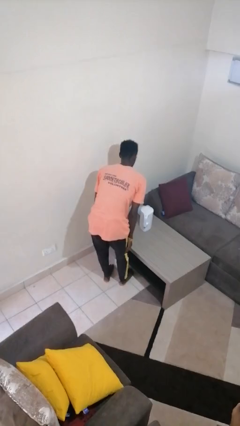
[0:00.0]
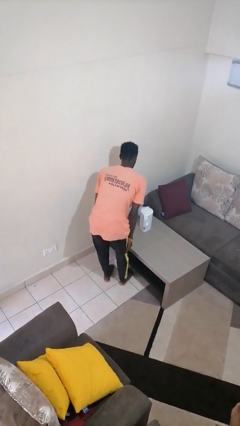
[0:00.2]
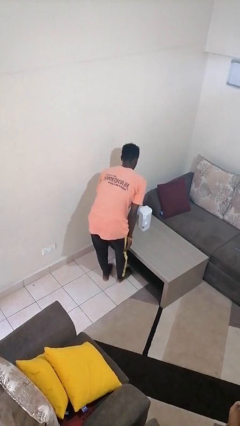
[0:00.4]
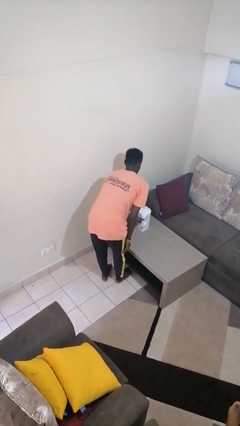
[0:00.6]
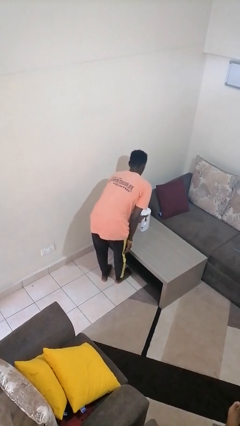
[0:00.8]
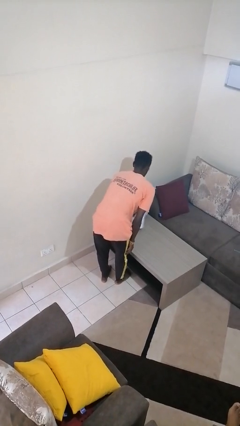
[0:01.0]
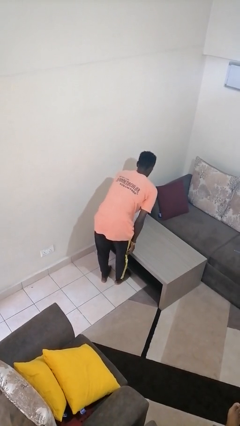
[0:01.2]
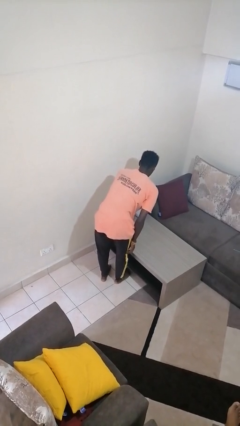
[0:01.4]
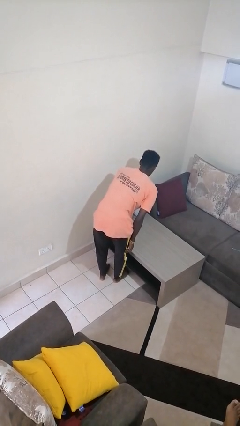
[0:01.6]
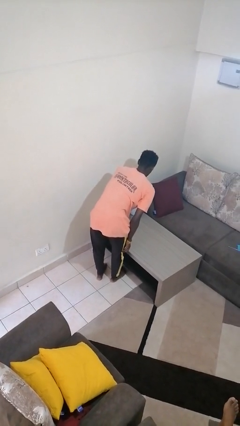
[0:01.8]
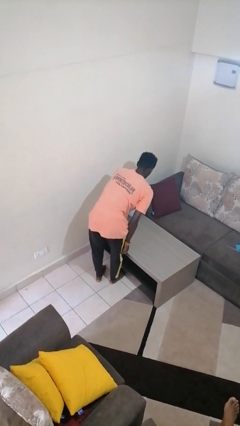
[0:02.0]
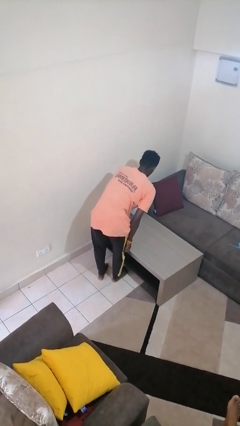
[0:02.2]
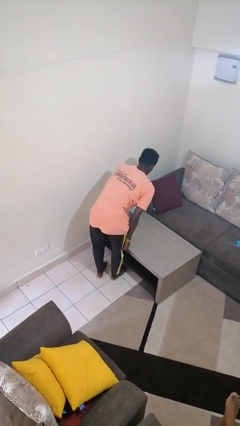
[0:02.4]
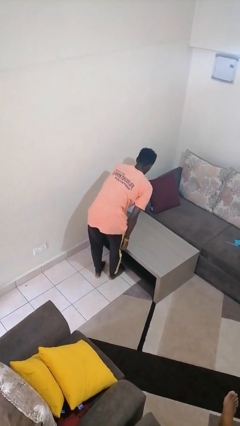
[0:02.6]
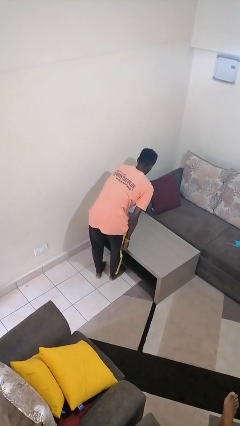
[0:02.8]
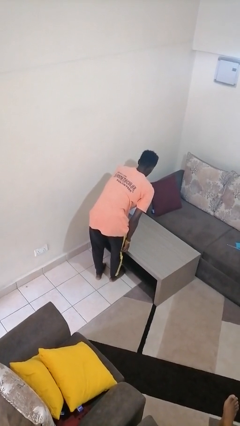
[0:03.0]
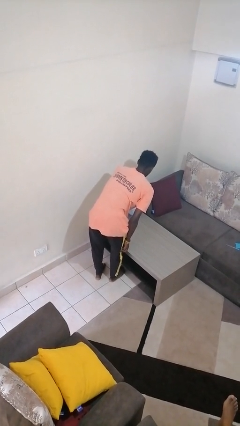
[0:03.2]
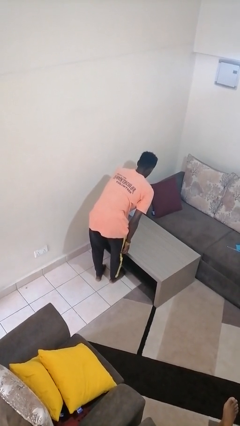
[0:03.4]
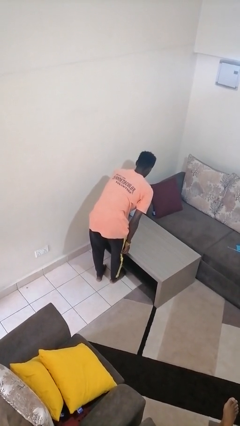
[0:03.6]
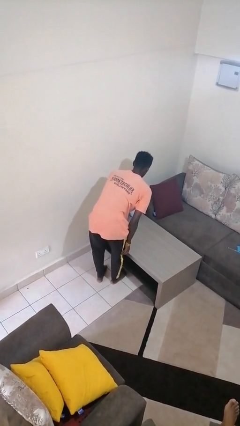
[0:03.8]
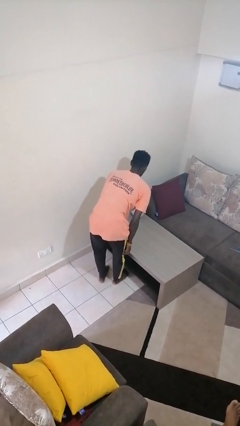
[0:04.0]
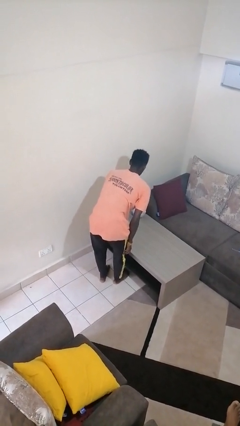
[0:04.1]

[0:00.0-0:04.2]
person pours into bowl

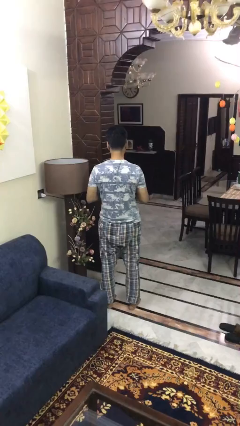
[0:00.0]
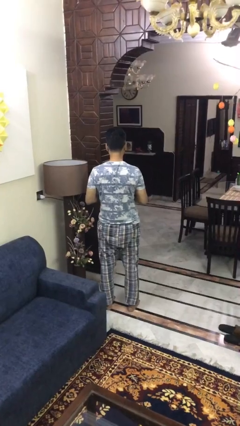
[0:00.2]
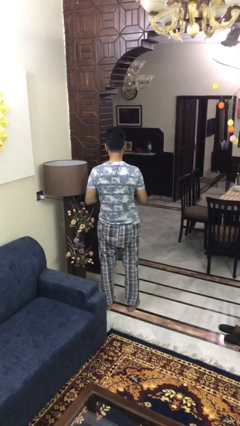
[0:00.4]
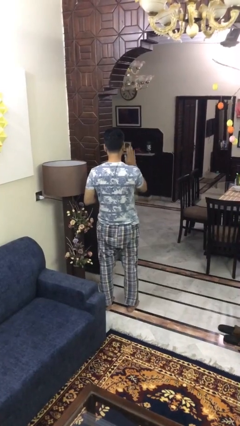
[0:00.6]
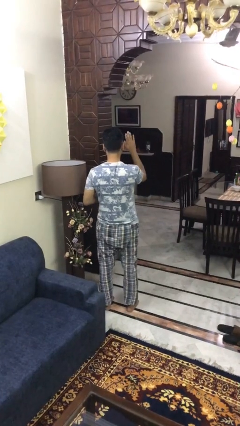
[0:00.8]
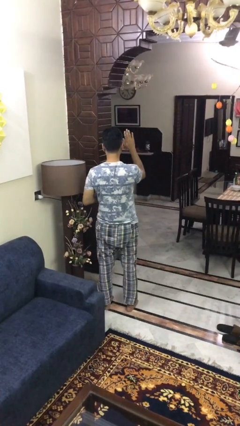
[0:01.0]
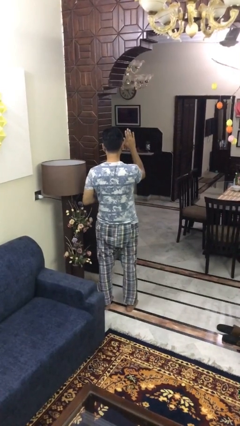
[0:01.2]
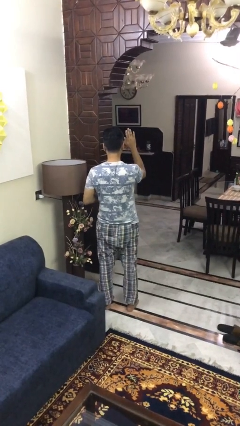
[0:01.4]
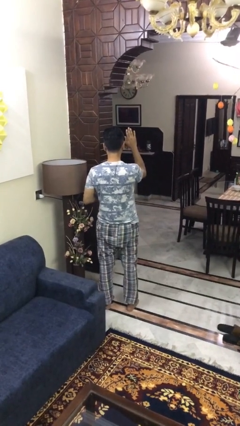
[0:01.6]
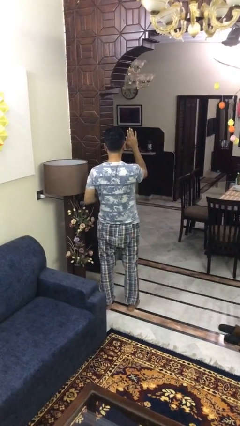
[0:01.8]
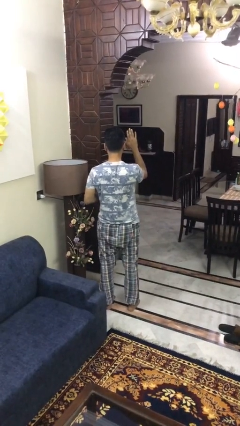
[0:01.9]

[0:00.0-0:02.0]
person gestures raise hand

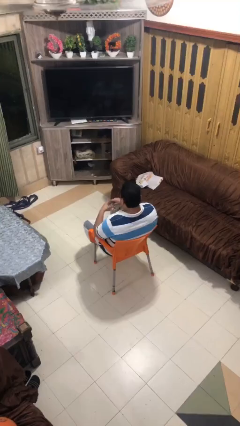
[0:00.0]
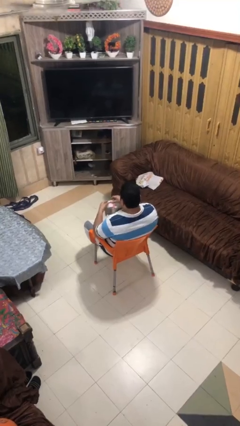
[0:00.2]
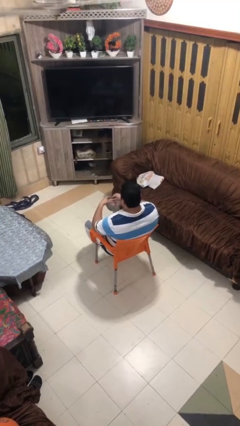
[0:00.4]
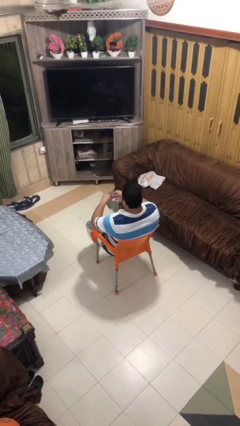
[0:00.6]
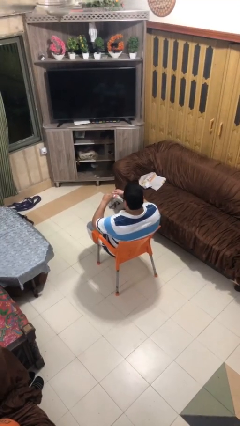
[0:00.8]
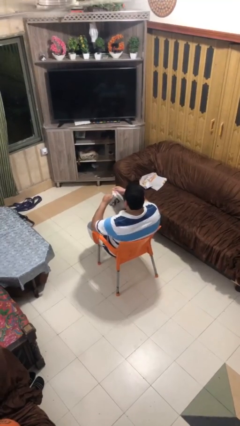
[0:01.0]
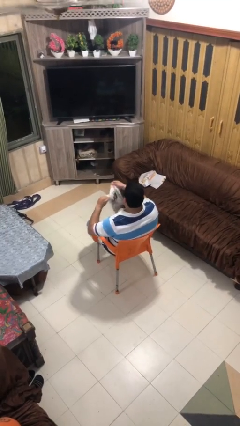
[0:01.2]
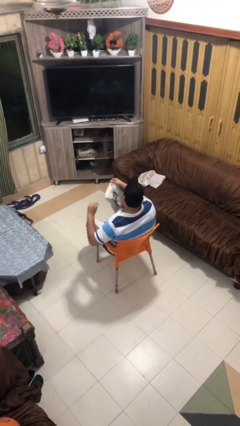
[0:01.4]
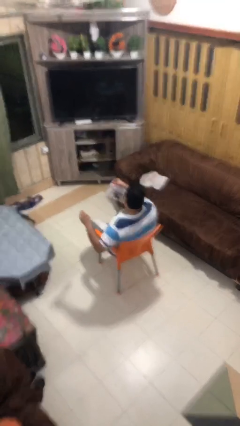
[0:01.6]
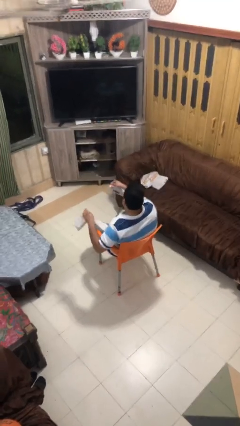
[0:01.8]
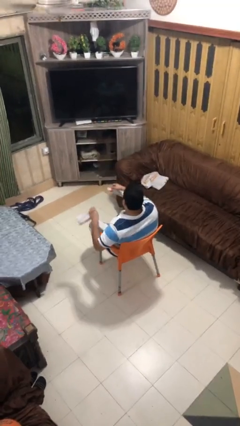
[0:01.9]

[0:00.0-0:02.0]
person tears paper

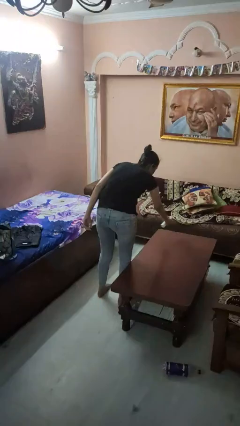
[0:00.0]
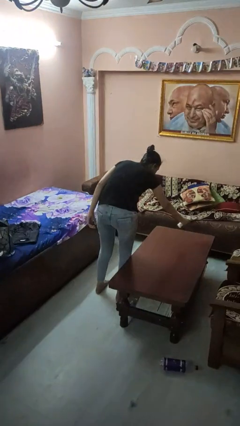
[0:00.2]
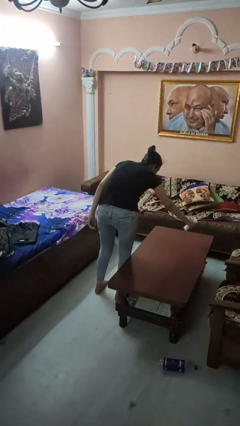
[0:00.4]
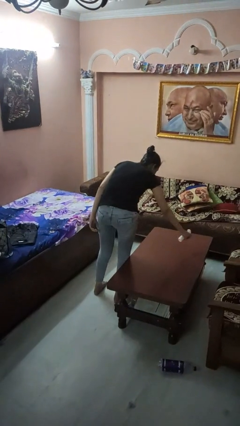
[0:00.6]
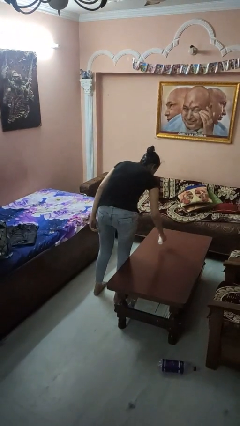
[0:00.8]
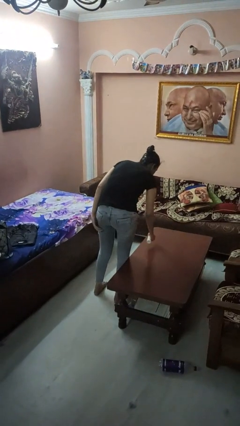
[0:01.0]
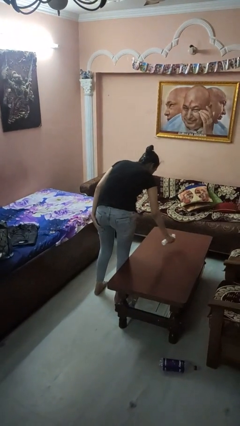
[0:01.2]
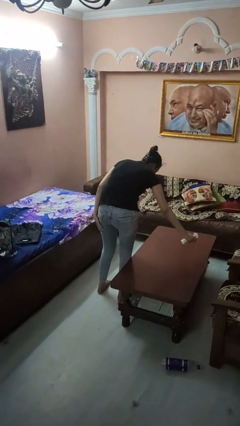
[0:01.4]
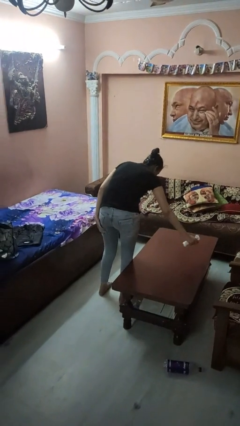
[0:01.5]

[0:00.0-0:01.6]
person sprays from bottle

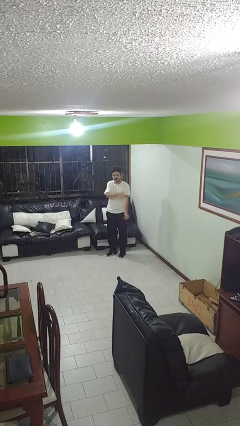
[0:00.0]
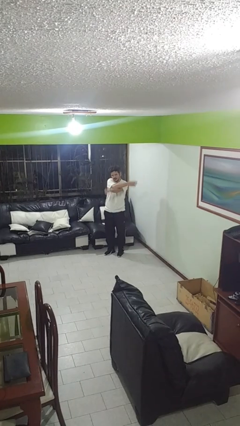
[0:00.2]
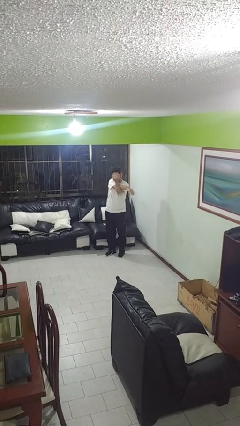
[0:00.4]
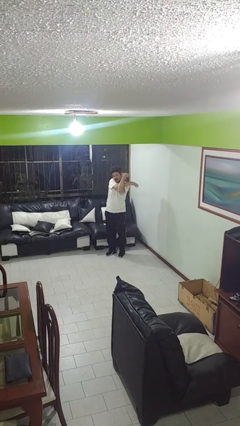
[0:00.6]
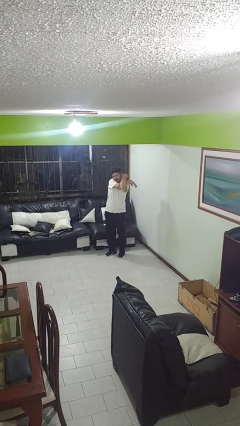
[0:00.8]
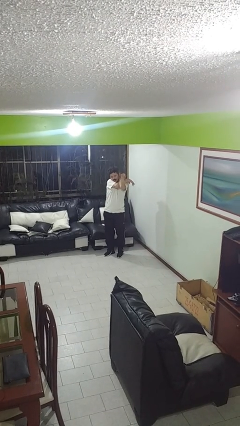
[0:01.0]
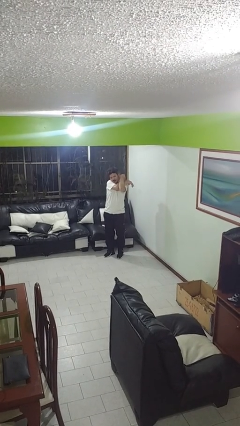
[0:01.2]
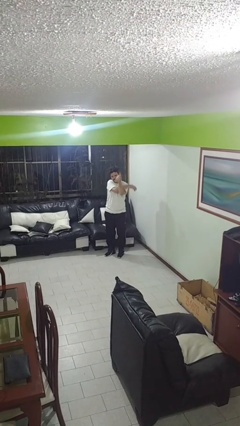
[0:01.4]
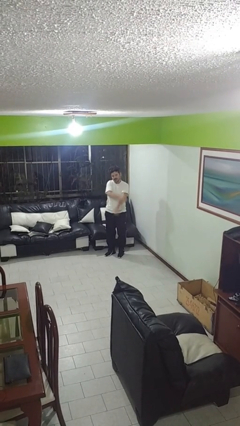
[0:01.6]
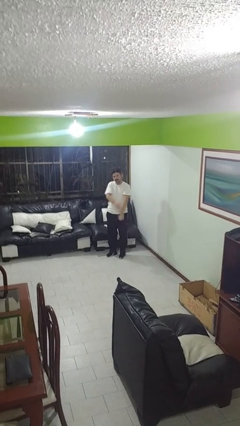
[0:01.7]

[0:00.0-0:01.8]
person stretches arms to side

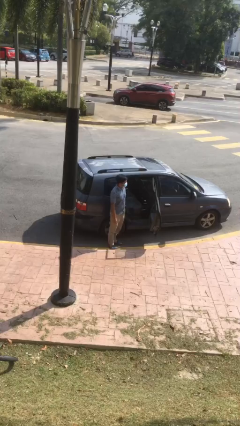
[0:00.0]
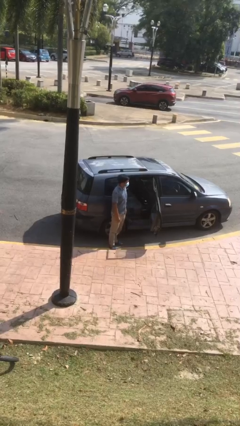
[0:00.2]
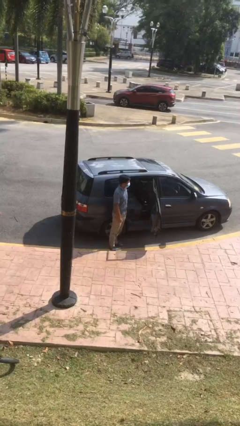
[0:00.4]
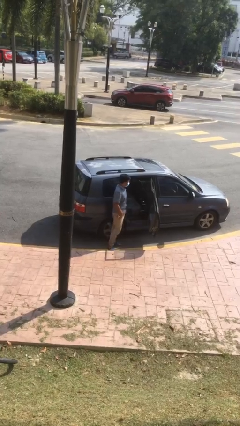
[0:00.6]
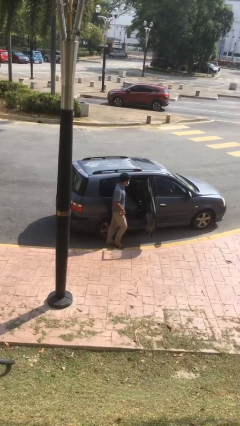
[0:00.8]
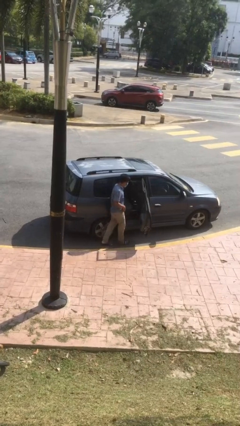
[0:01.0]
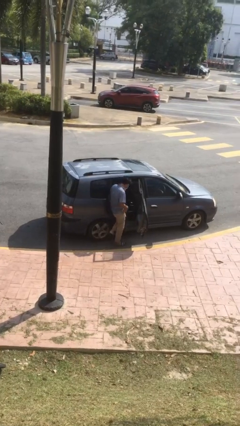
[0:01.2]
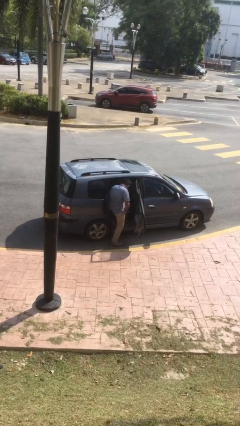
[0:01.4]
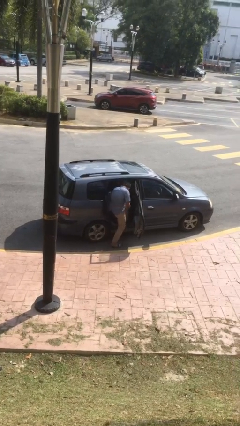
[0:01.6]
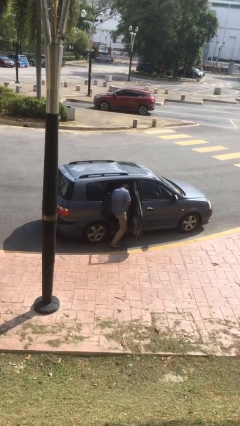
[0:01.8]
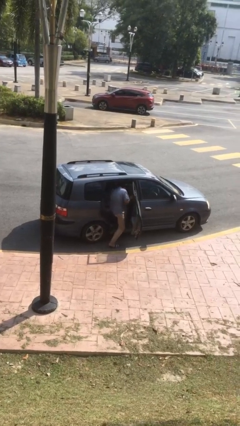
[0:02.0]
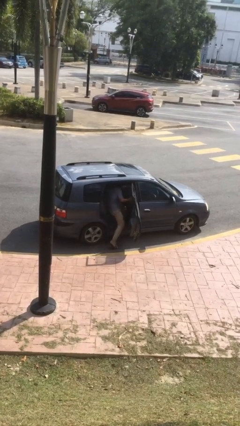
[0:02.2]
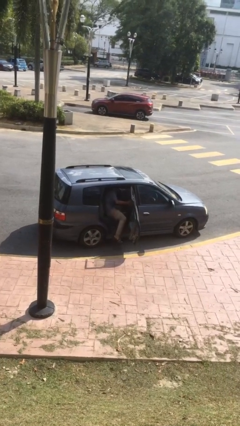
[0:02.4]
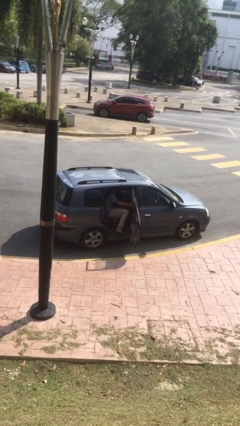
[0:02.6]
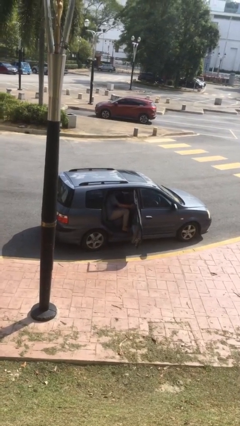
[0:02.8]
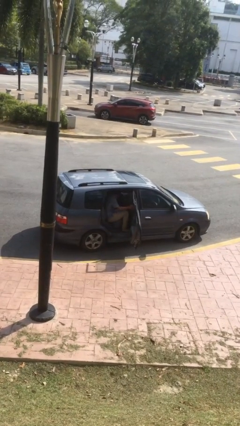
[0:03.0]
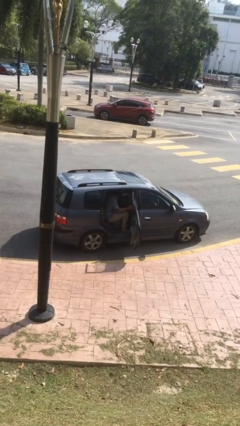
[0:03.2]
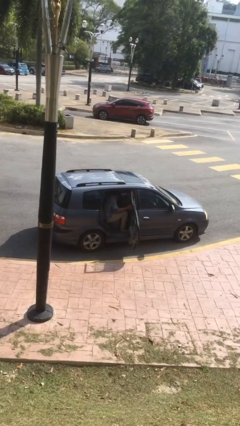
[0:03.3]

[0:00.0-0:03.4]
person enters car

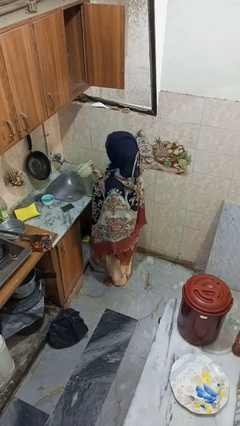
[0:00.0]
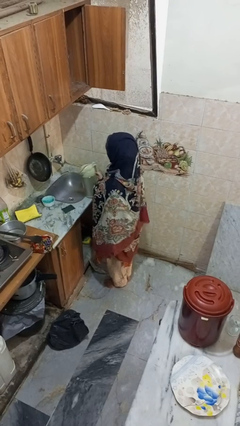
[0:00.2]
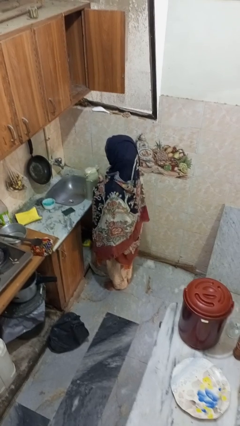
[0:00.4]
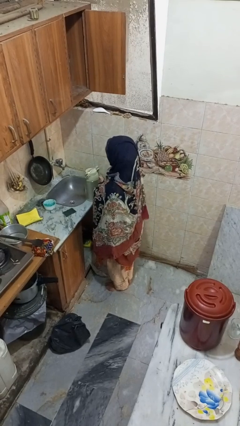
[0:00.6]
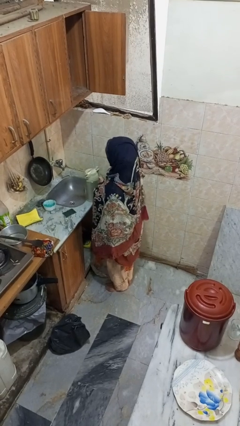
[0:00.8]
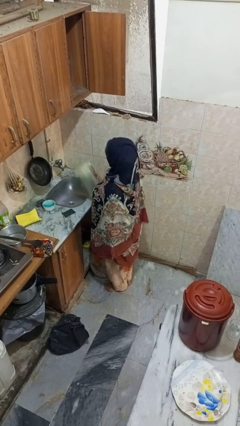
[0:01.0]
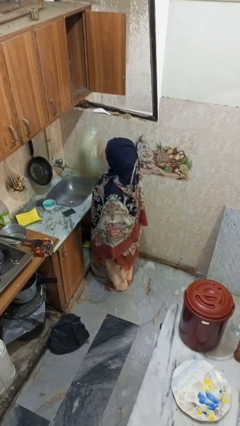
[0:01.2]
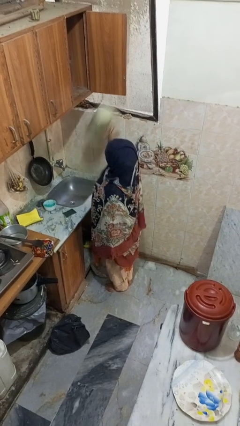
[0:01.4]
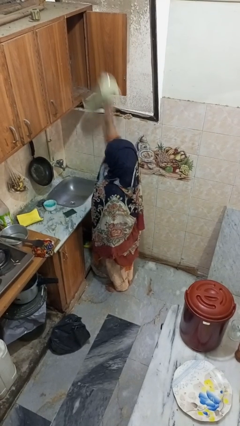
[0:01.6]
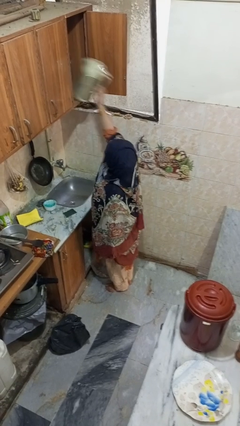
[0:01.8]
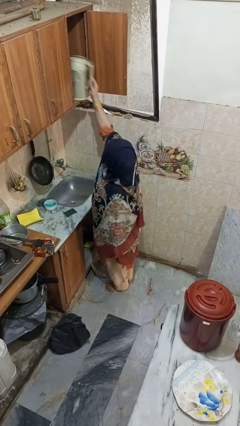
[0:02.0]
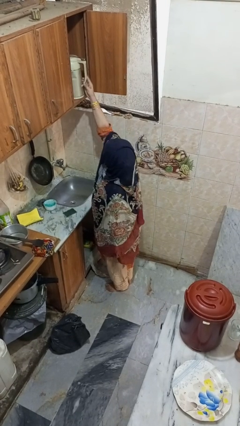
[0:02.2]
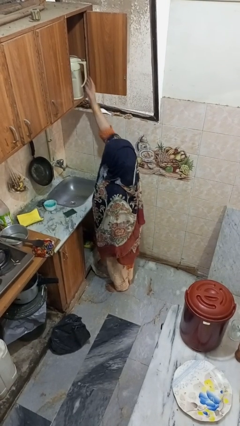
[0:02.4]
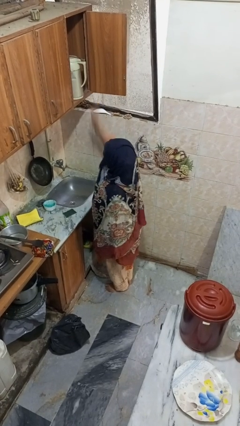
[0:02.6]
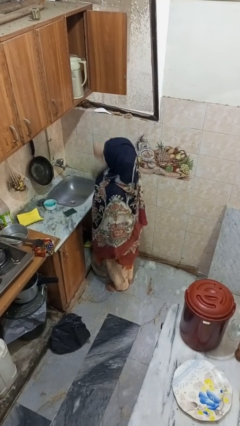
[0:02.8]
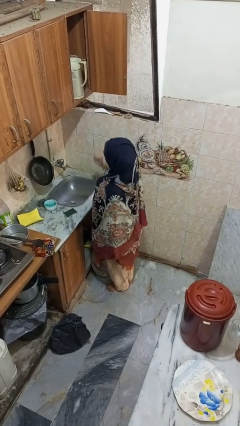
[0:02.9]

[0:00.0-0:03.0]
person takes object from cabinet
